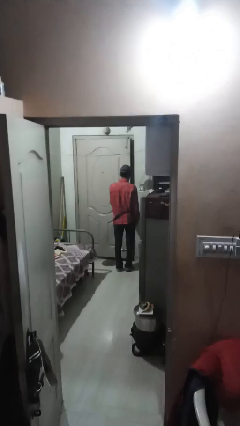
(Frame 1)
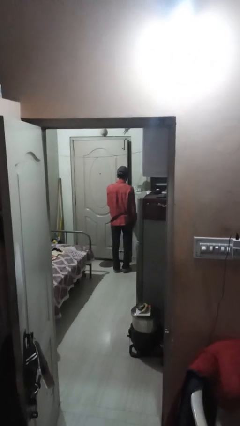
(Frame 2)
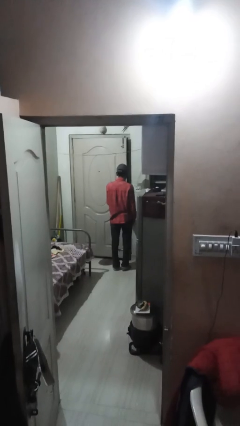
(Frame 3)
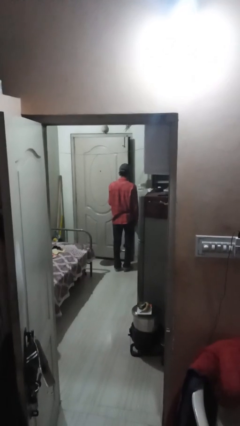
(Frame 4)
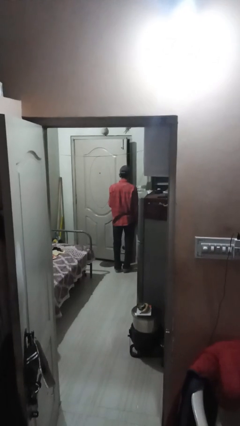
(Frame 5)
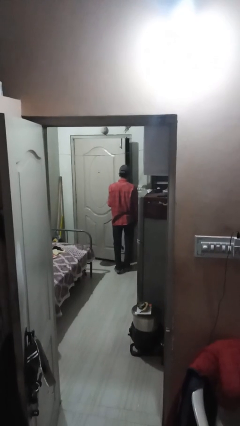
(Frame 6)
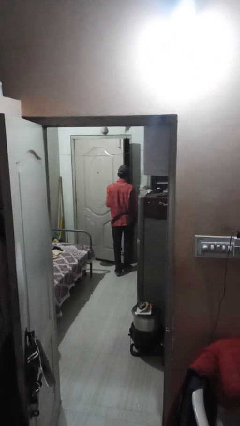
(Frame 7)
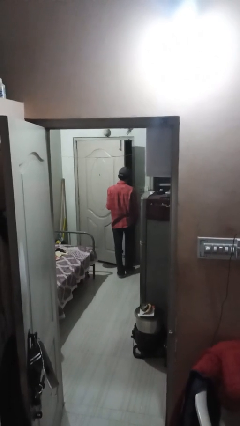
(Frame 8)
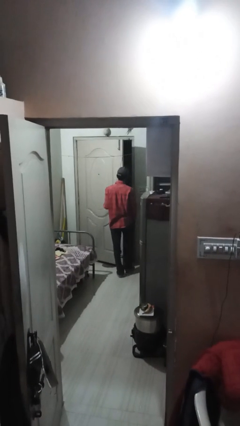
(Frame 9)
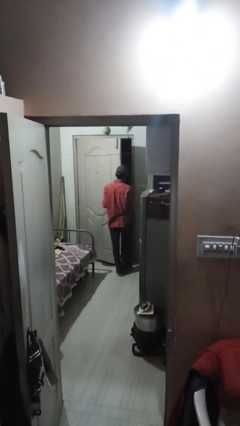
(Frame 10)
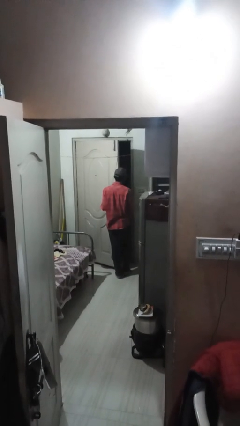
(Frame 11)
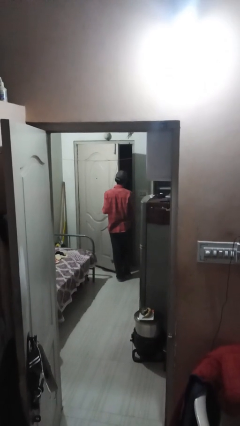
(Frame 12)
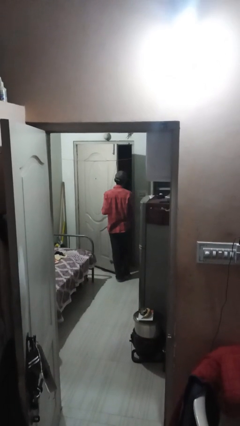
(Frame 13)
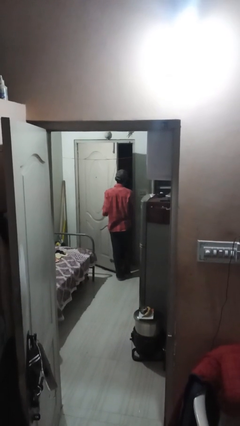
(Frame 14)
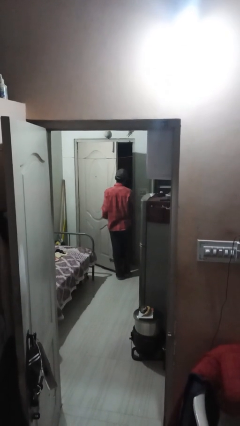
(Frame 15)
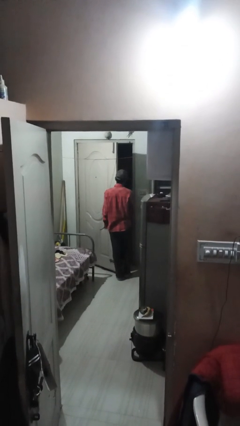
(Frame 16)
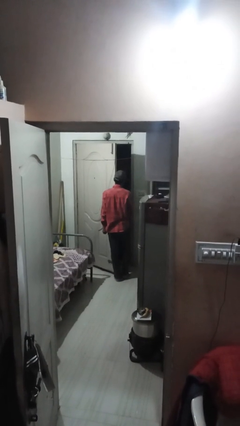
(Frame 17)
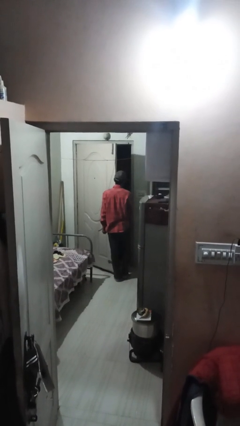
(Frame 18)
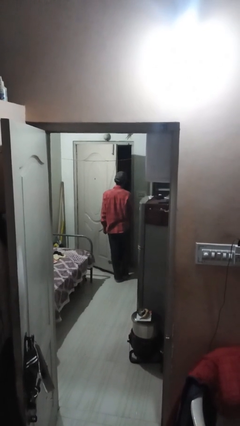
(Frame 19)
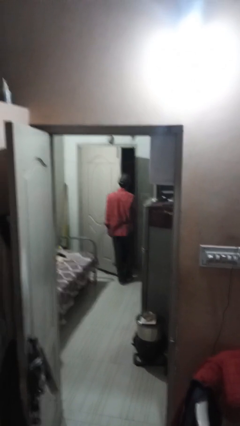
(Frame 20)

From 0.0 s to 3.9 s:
person opens facility door

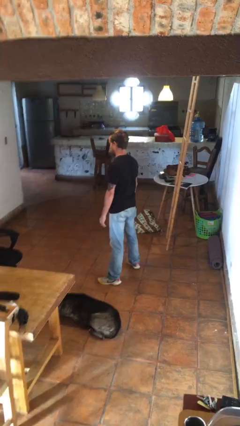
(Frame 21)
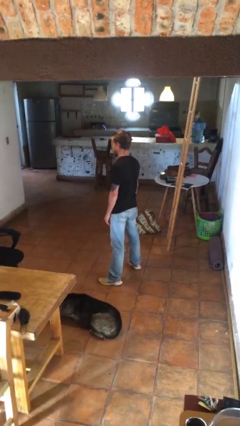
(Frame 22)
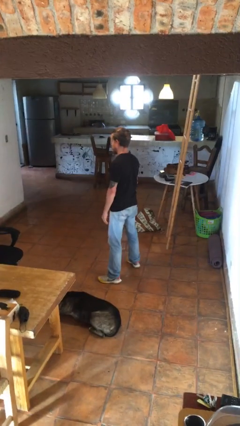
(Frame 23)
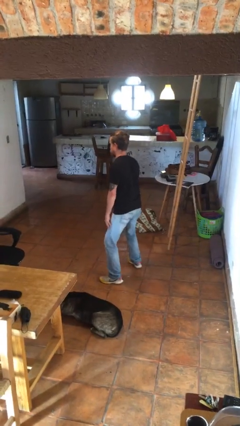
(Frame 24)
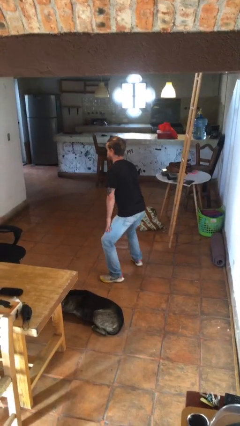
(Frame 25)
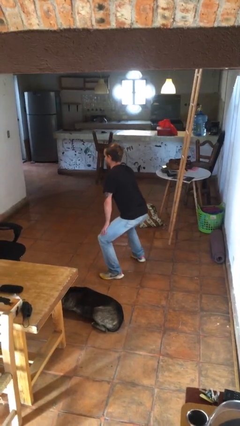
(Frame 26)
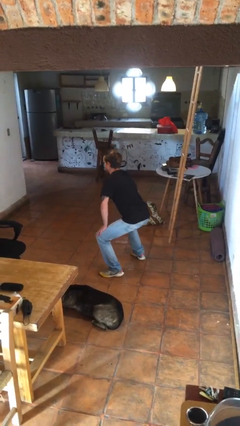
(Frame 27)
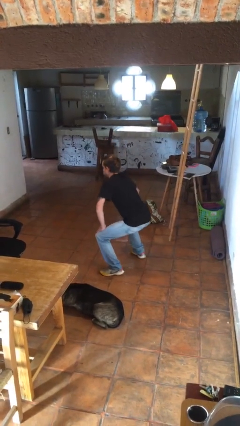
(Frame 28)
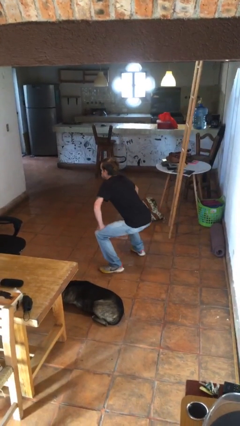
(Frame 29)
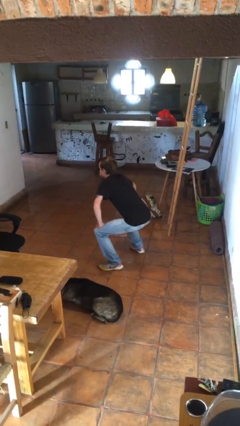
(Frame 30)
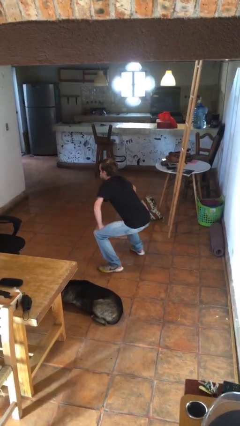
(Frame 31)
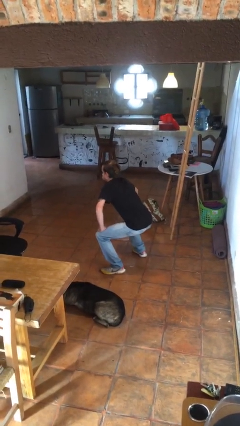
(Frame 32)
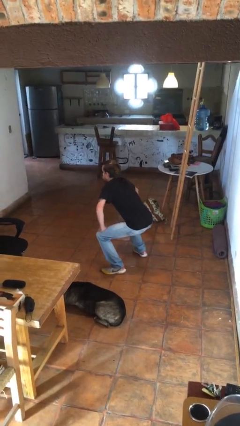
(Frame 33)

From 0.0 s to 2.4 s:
person squats

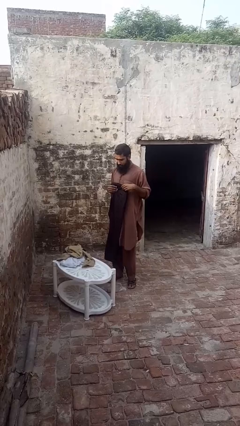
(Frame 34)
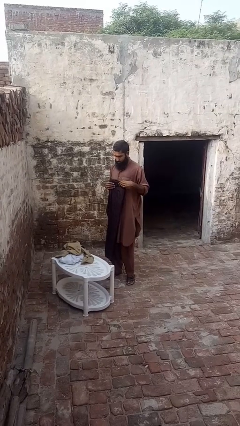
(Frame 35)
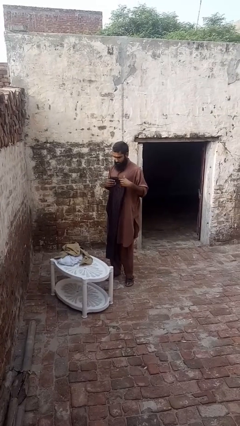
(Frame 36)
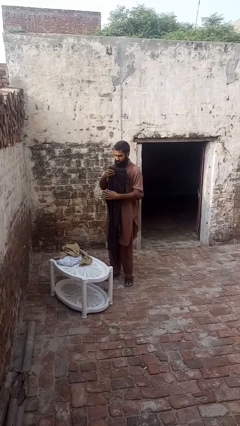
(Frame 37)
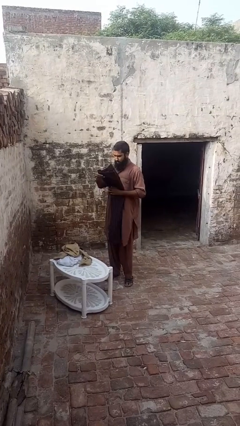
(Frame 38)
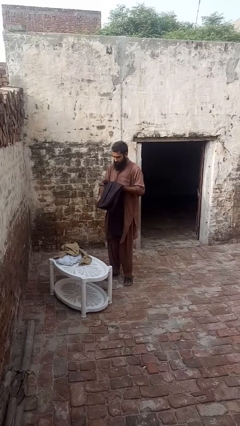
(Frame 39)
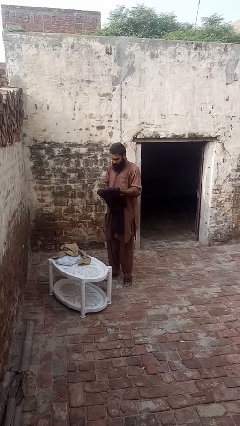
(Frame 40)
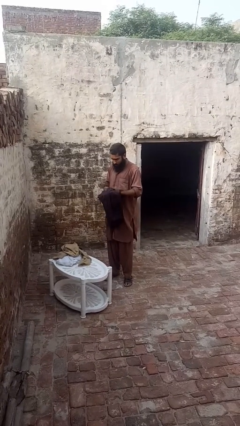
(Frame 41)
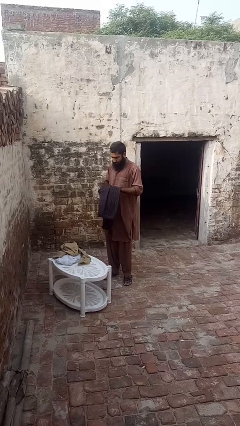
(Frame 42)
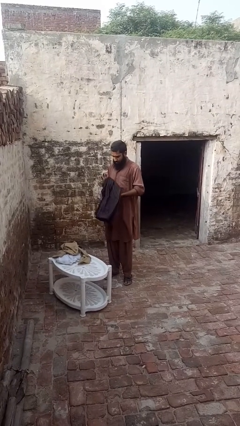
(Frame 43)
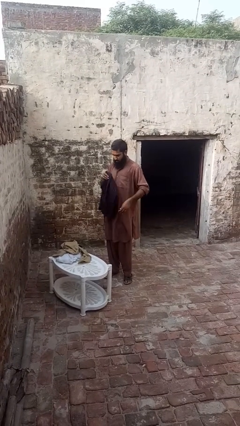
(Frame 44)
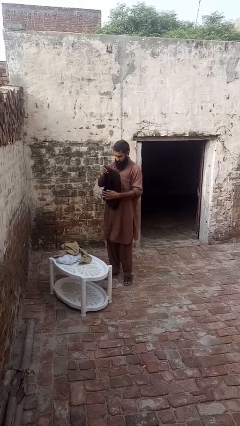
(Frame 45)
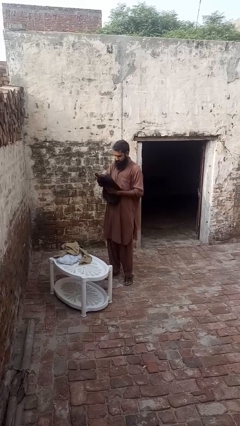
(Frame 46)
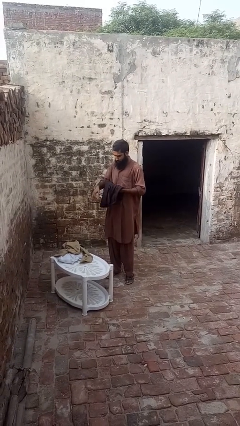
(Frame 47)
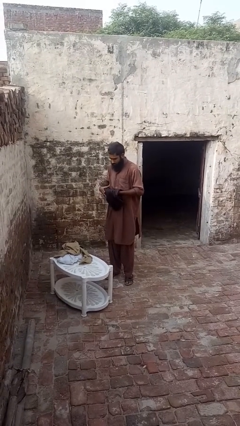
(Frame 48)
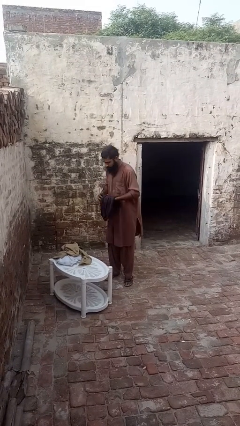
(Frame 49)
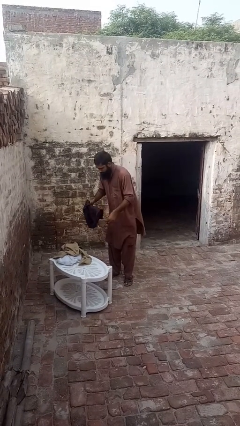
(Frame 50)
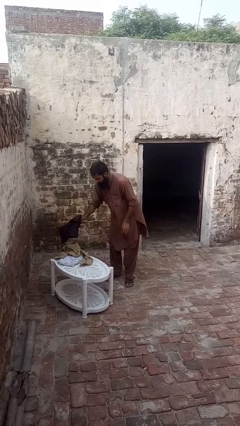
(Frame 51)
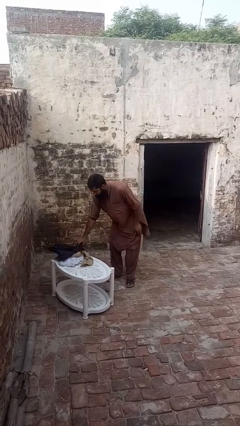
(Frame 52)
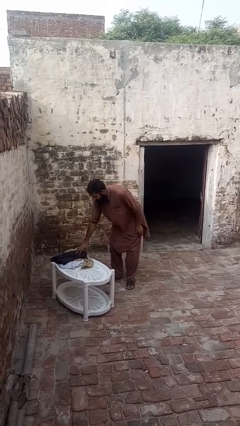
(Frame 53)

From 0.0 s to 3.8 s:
person folds pants

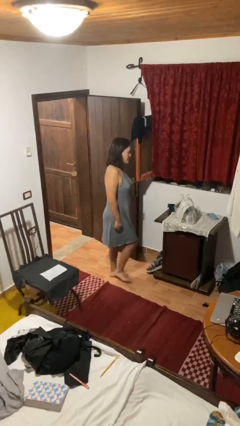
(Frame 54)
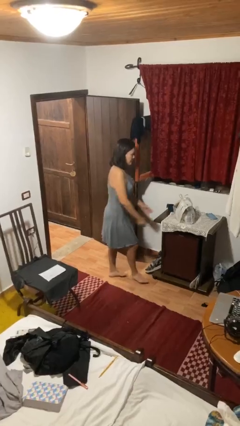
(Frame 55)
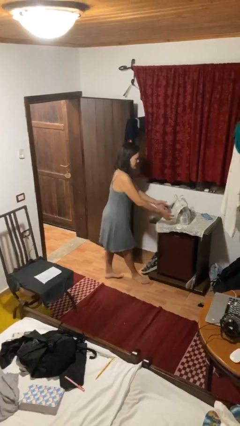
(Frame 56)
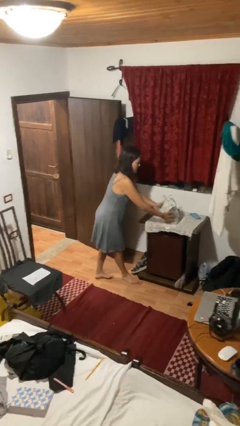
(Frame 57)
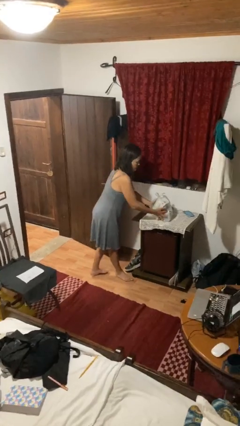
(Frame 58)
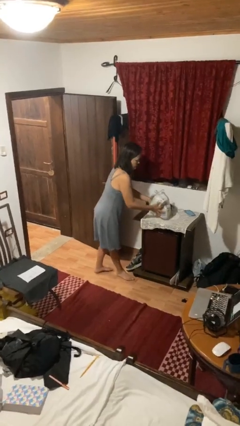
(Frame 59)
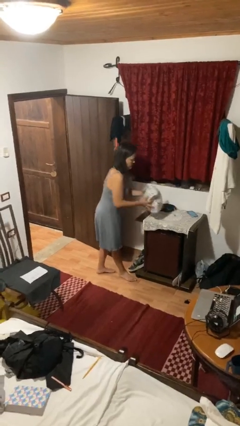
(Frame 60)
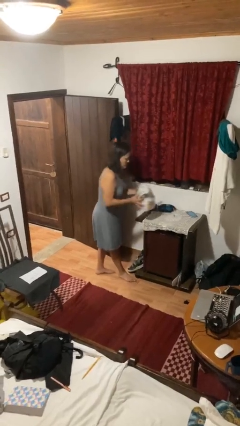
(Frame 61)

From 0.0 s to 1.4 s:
person picks up object from countertop

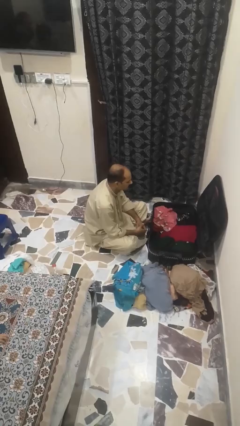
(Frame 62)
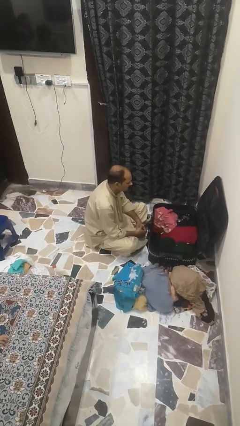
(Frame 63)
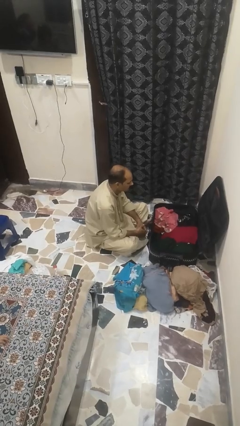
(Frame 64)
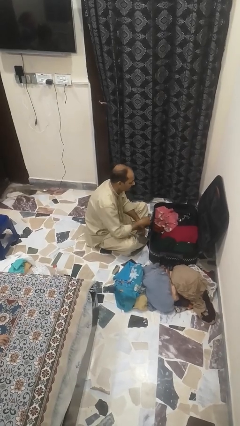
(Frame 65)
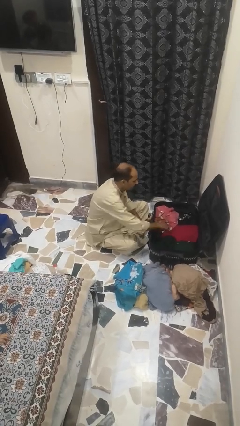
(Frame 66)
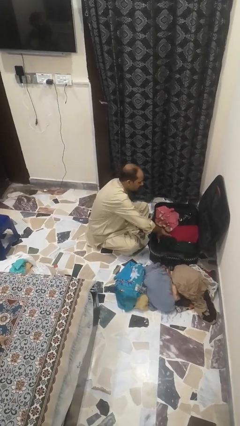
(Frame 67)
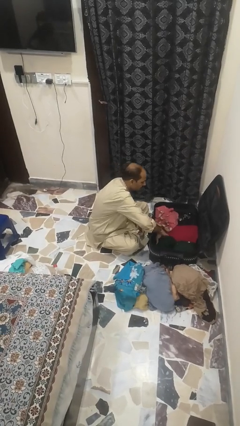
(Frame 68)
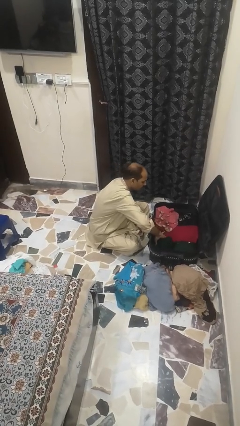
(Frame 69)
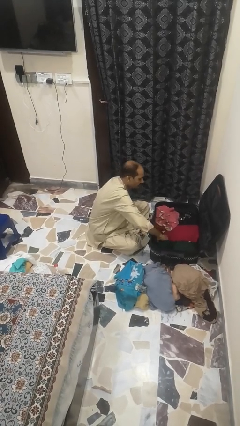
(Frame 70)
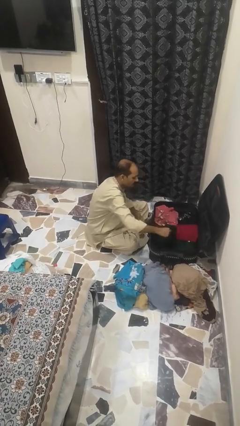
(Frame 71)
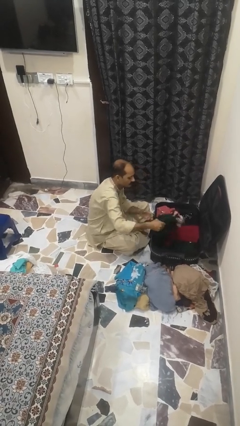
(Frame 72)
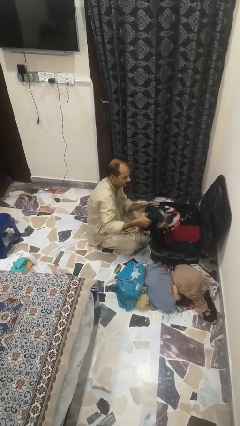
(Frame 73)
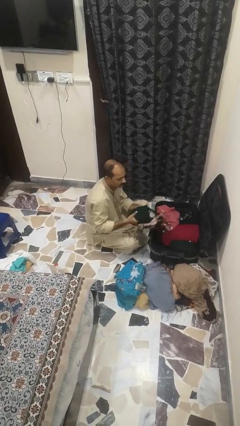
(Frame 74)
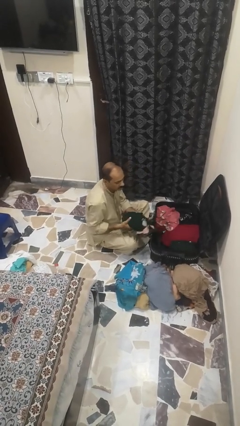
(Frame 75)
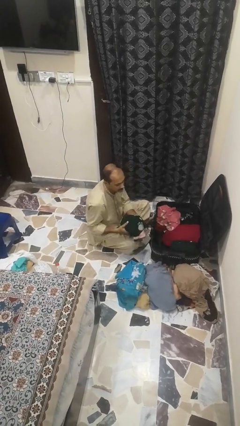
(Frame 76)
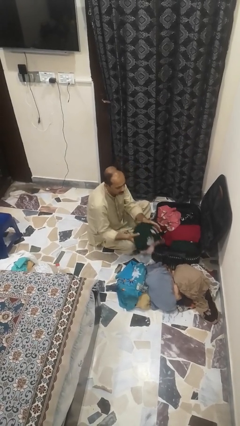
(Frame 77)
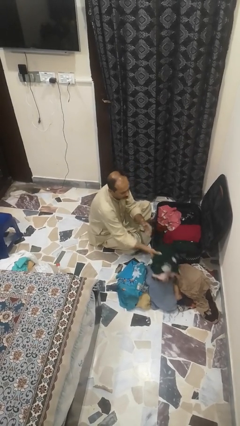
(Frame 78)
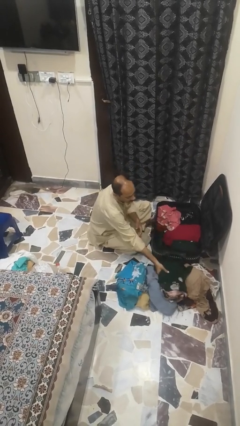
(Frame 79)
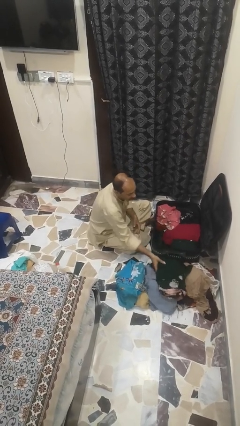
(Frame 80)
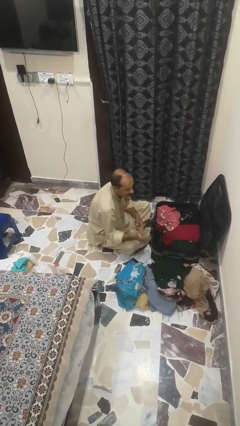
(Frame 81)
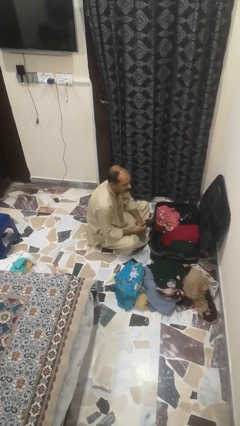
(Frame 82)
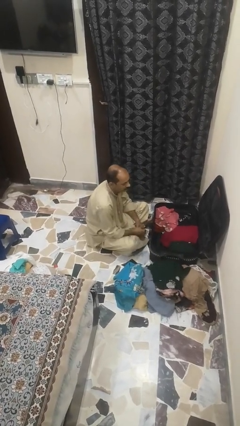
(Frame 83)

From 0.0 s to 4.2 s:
person unloads clothes from suitcase

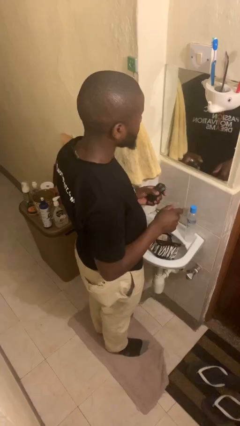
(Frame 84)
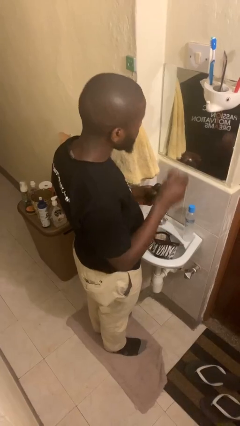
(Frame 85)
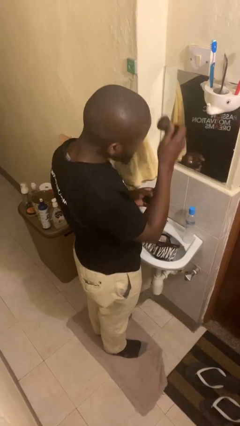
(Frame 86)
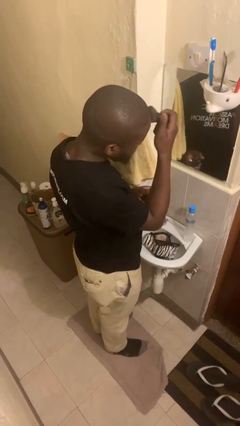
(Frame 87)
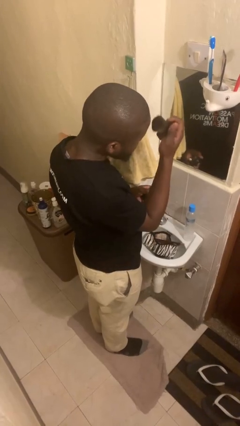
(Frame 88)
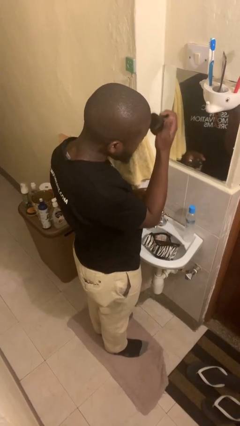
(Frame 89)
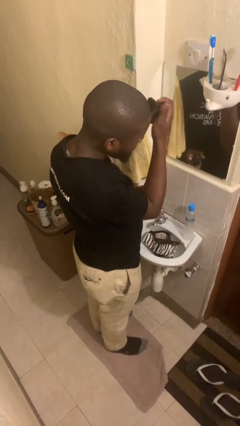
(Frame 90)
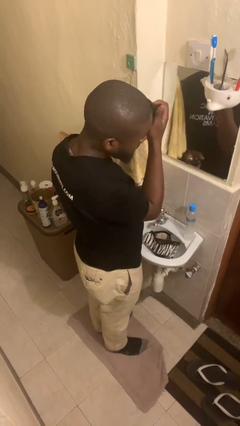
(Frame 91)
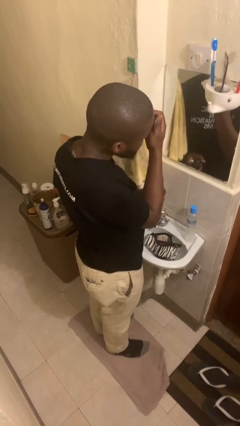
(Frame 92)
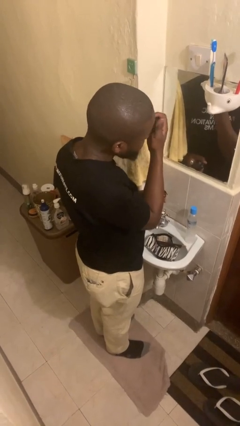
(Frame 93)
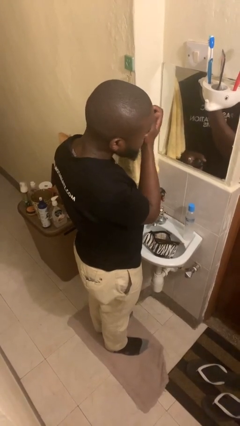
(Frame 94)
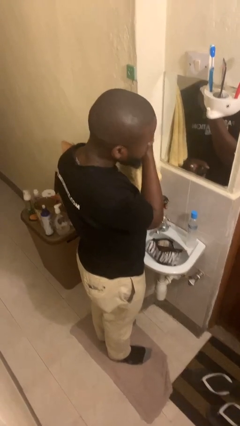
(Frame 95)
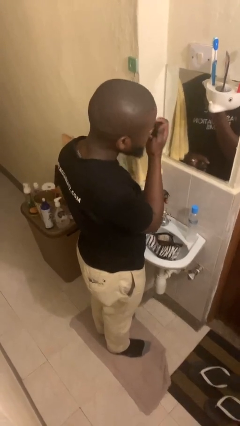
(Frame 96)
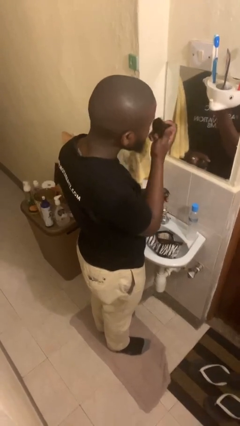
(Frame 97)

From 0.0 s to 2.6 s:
person applies foundation makeup
